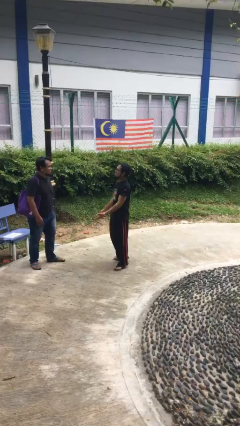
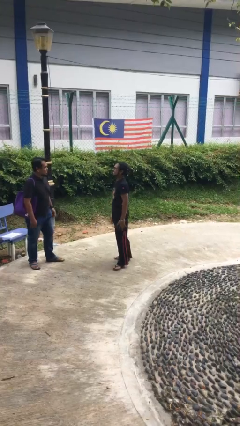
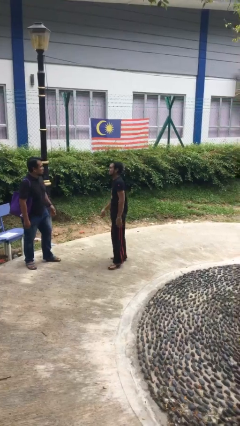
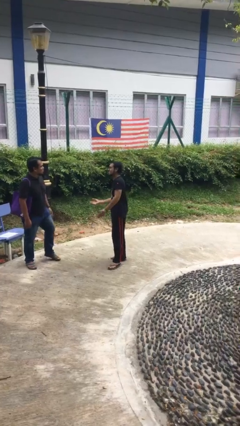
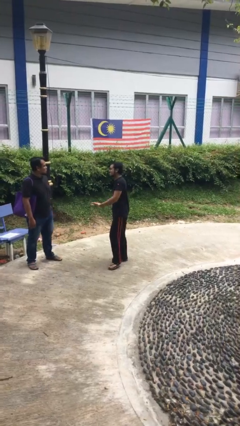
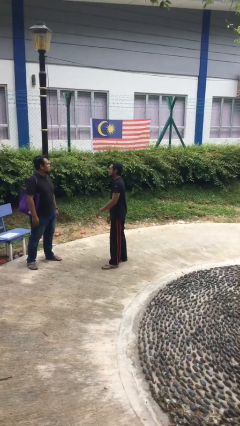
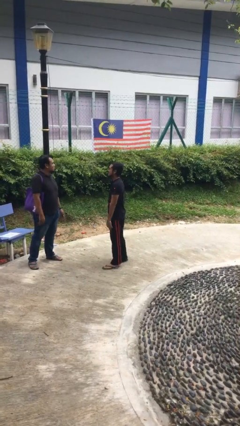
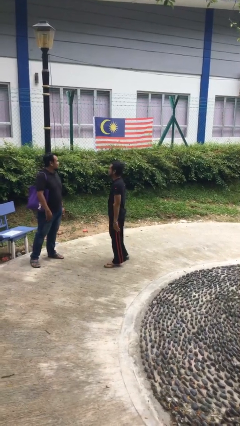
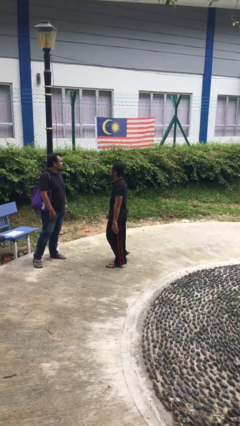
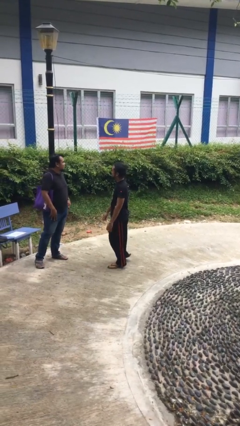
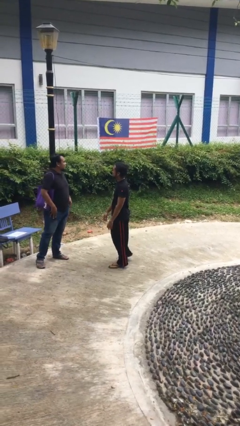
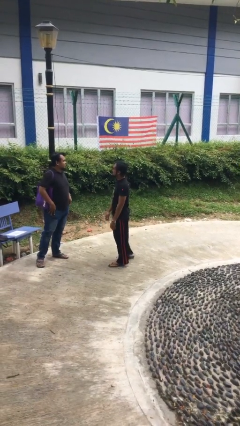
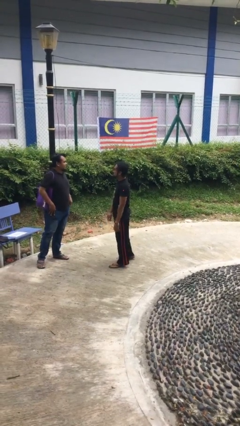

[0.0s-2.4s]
person talks to person

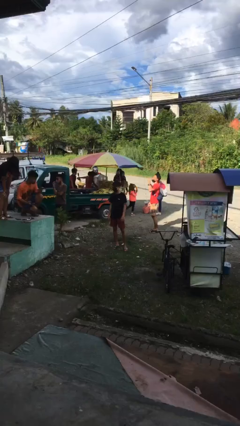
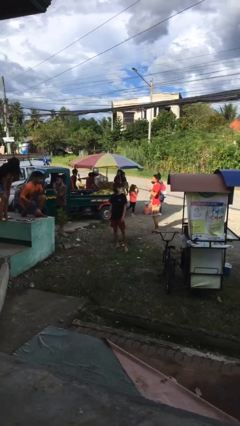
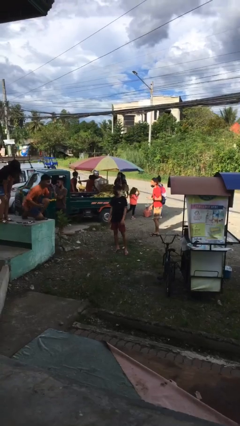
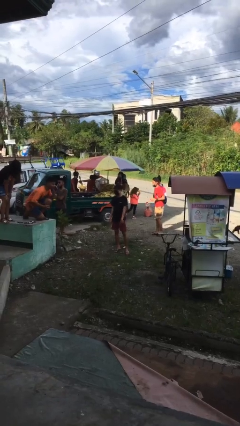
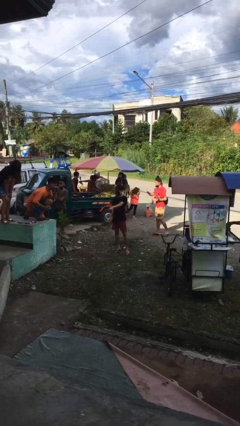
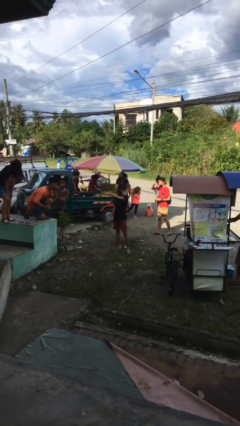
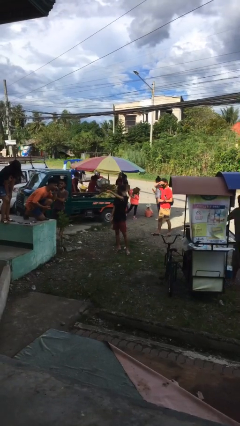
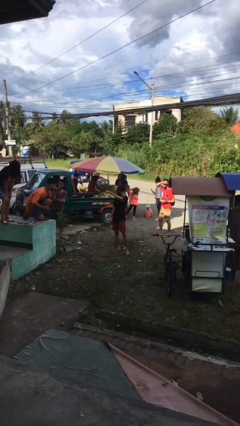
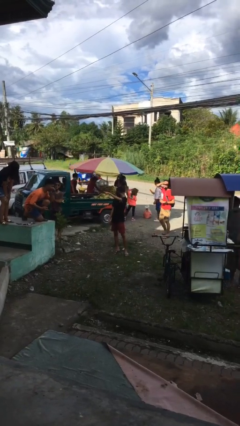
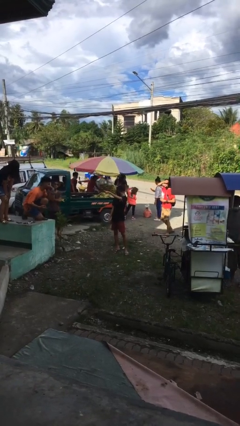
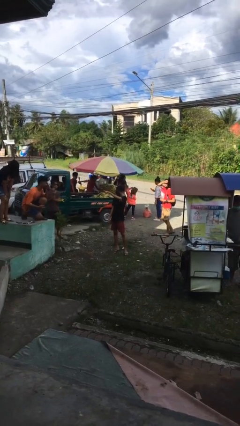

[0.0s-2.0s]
person points at person

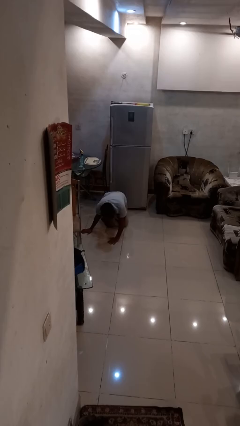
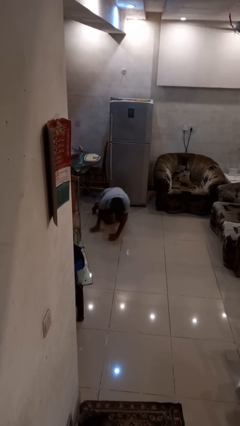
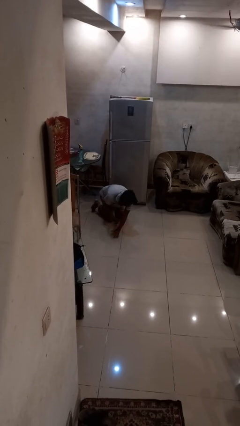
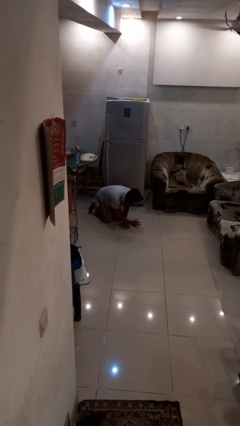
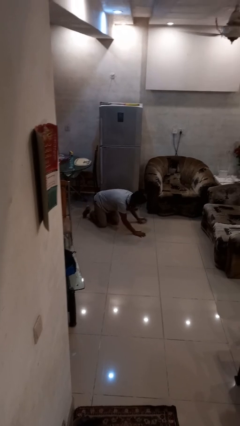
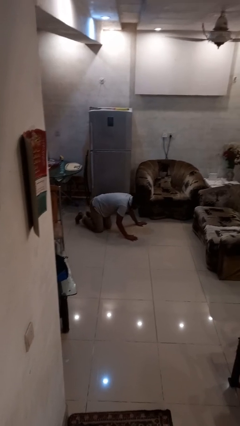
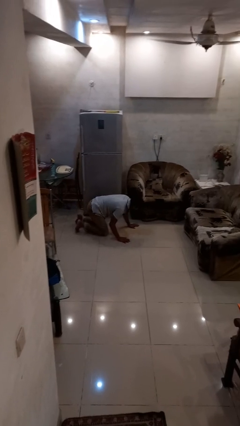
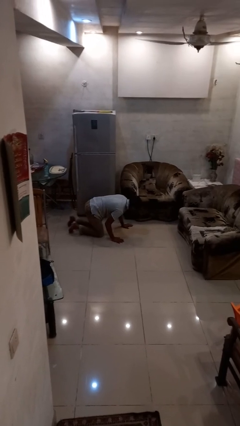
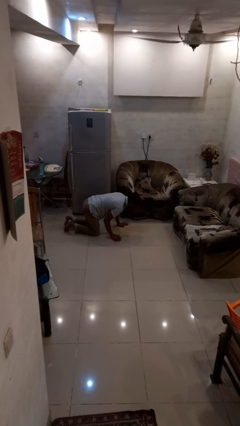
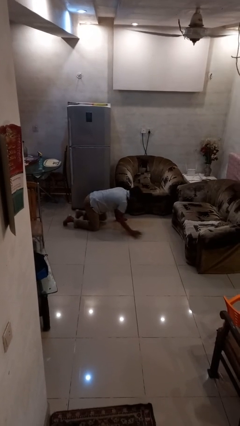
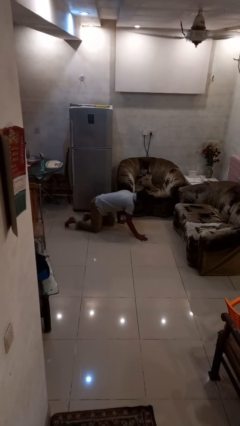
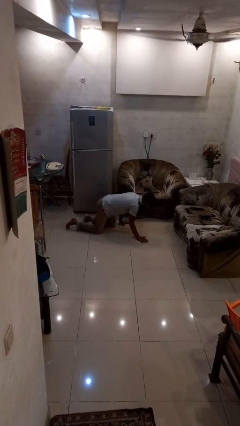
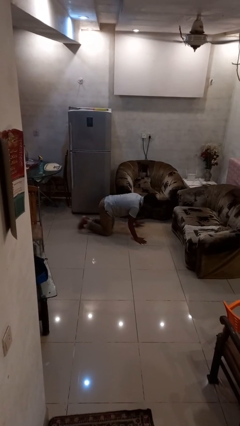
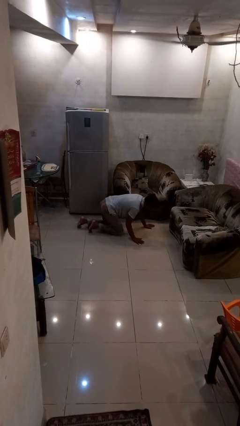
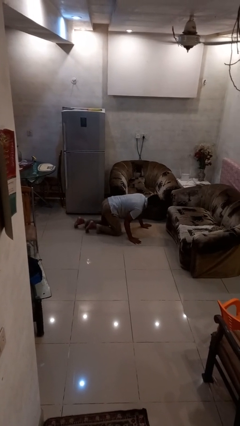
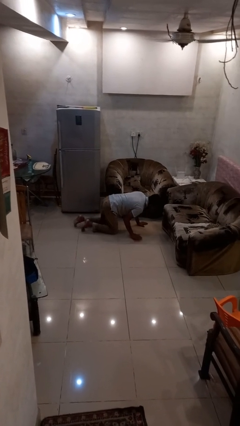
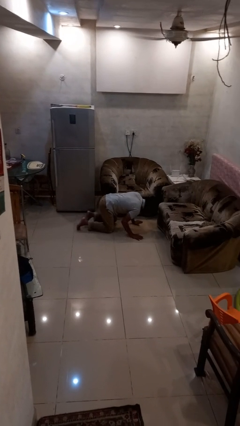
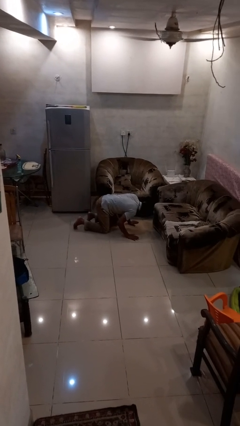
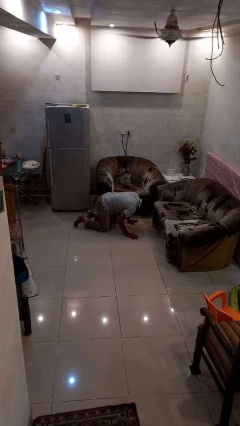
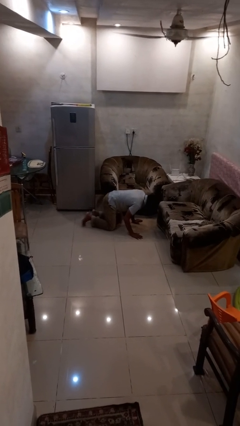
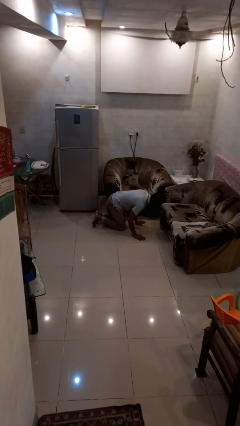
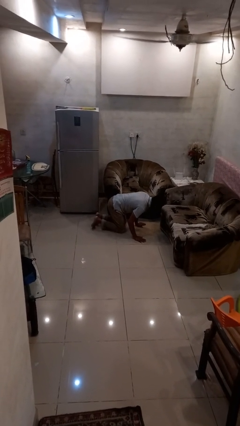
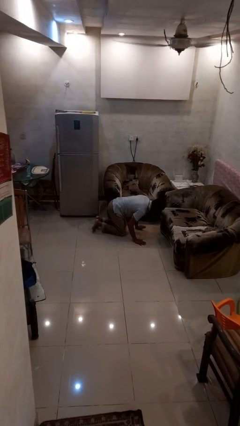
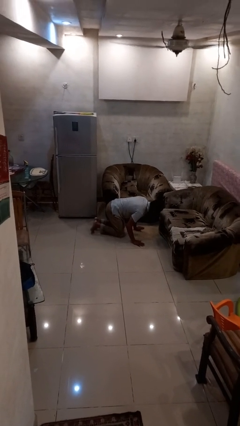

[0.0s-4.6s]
person crawls

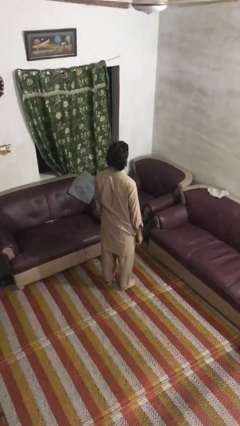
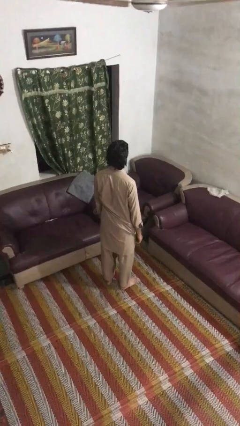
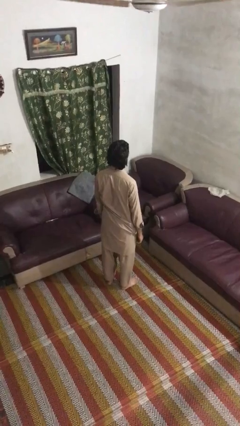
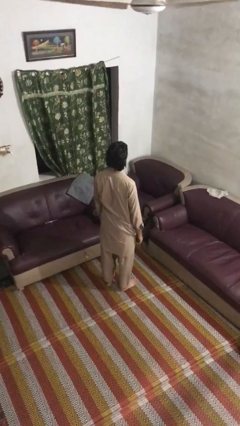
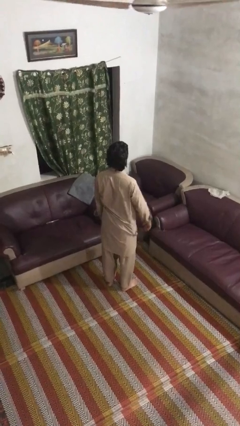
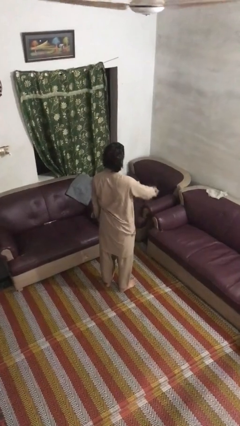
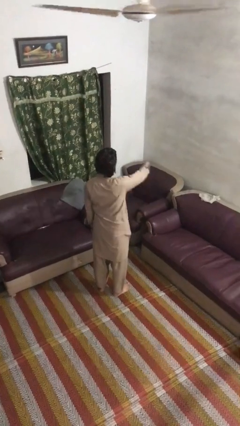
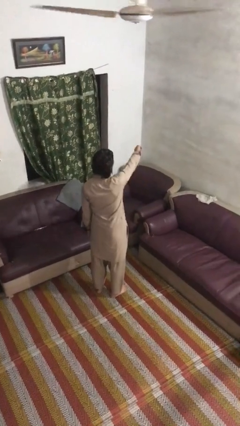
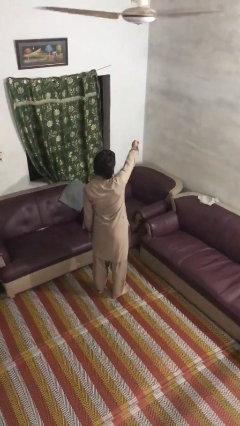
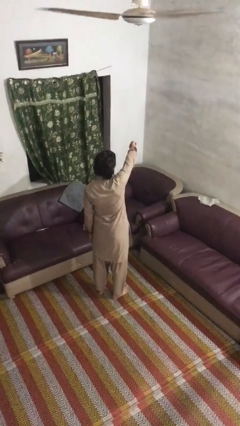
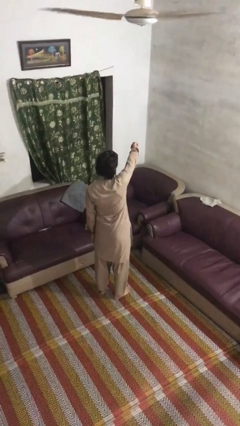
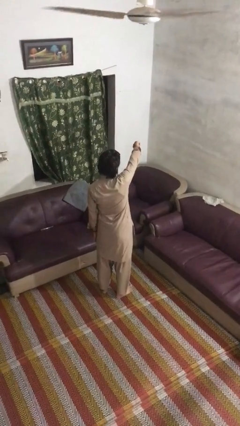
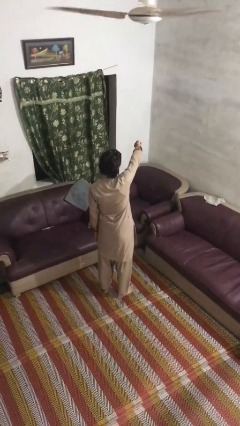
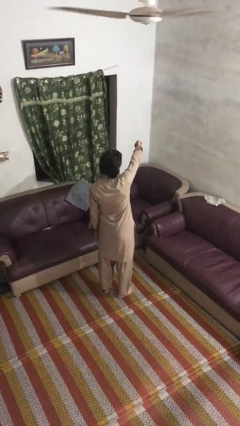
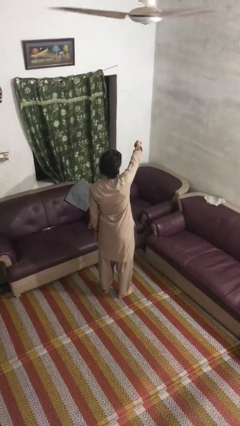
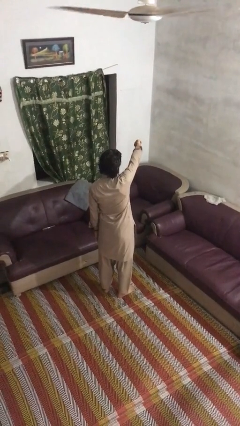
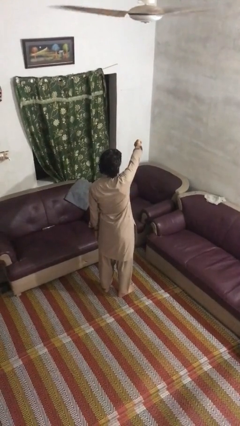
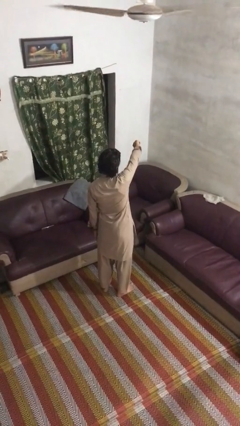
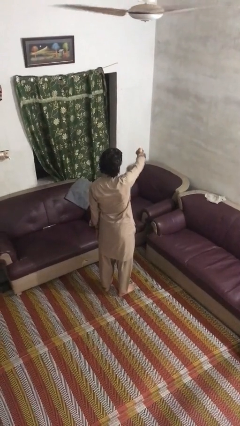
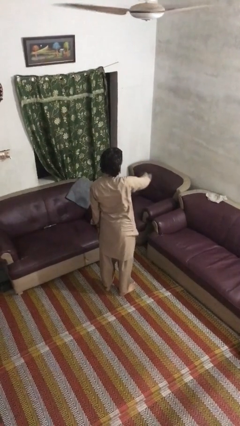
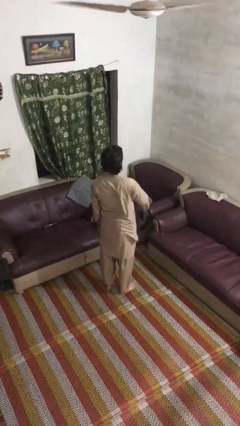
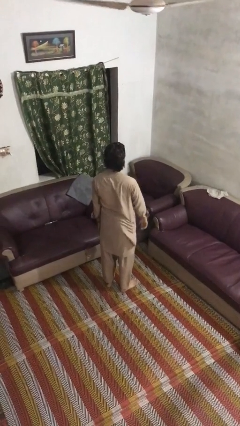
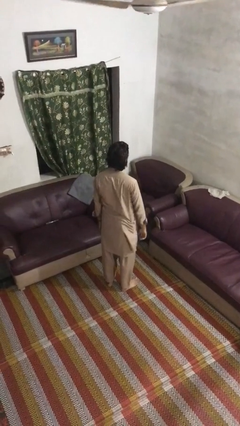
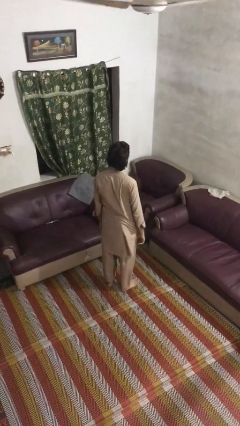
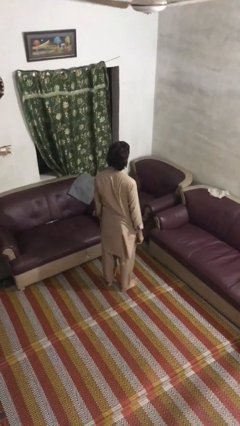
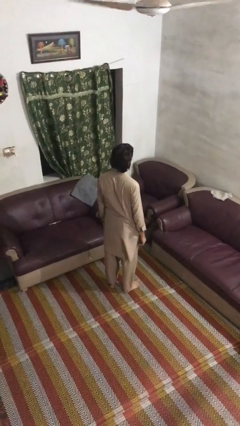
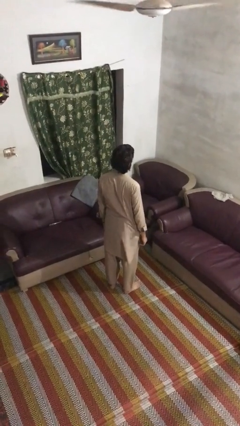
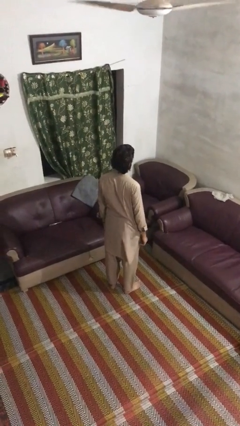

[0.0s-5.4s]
person gestures thumbs down

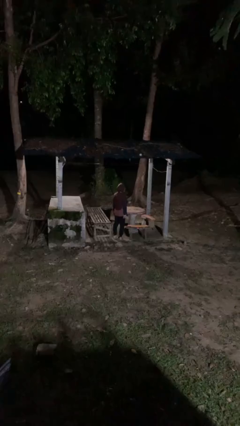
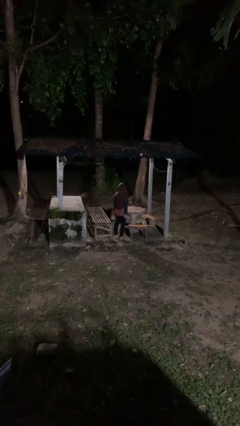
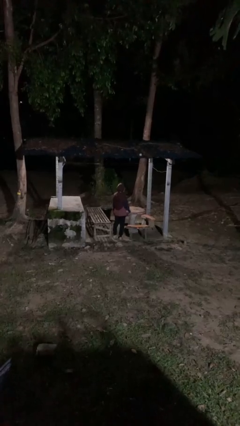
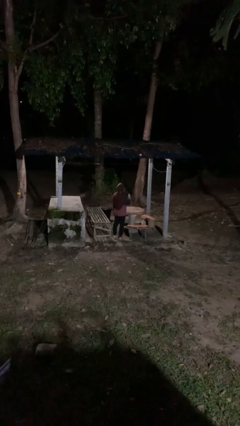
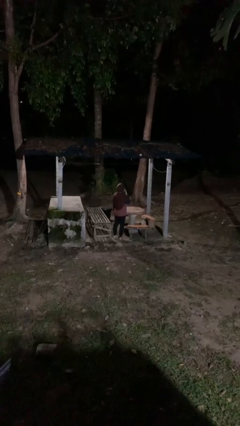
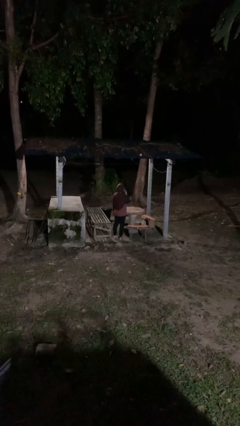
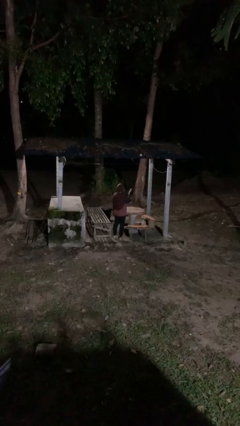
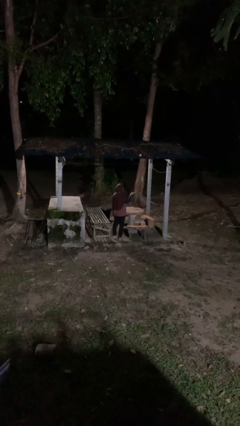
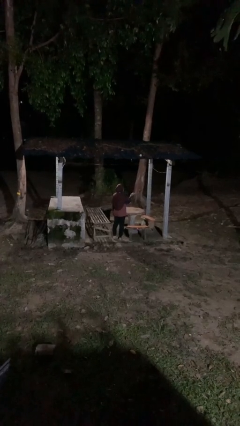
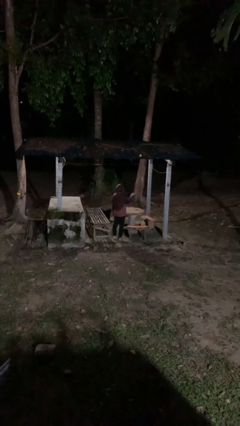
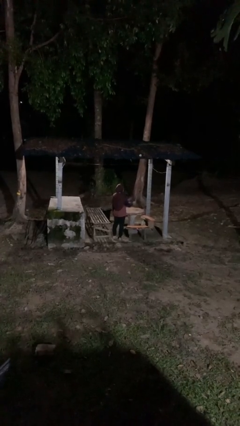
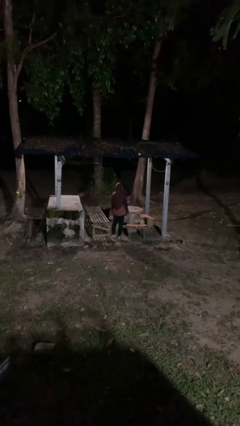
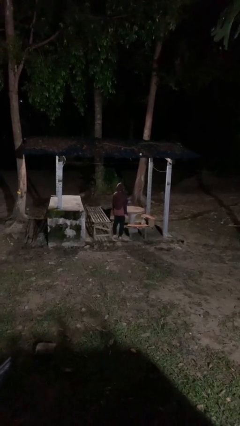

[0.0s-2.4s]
person gestures blow kiss

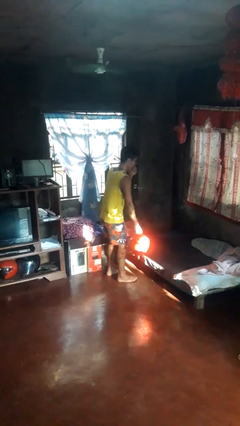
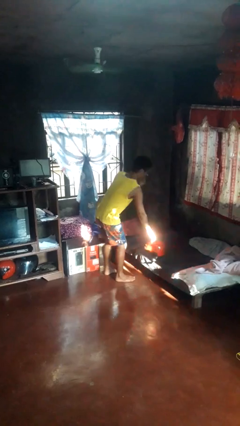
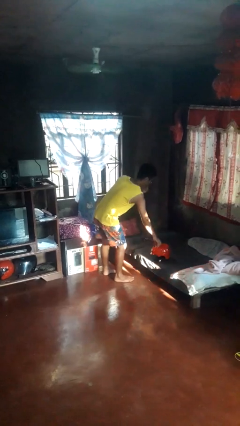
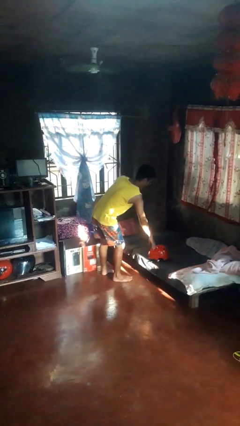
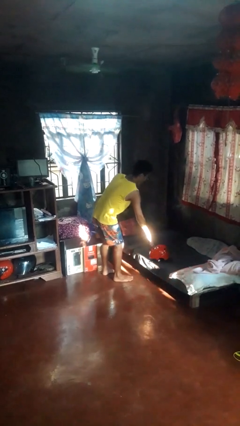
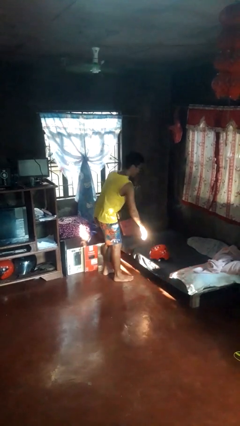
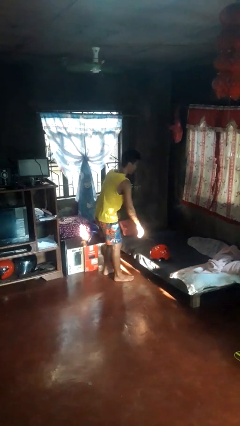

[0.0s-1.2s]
person puts down object on bed
